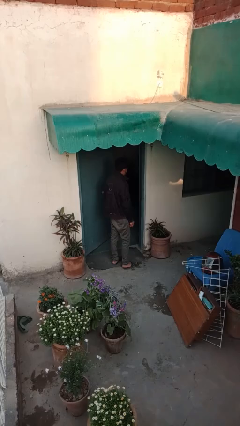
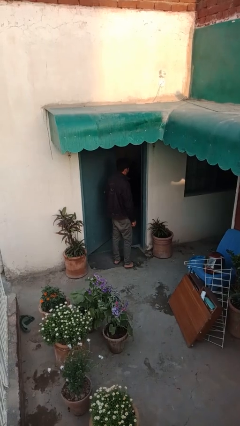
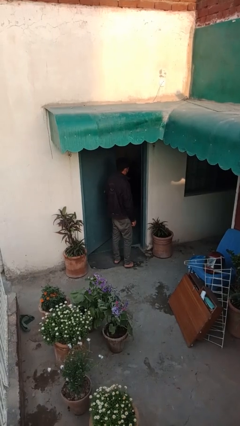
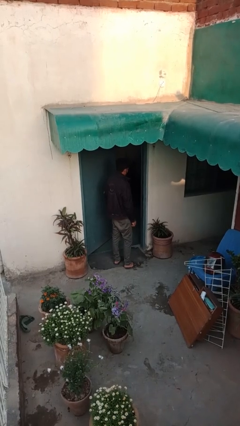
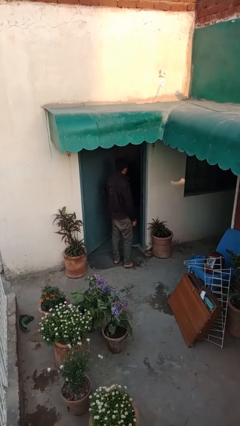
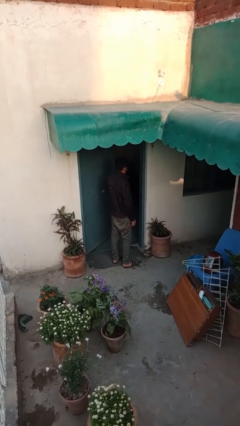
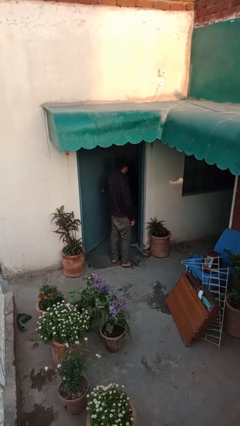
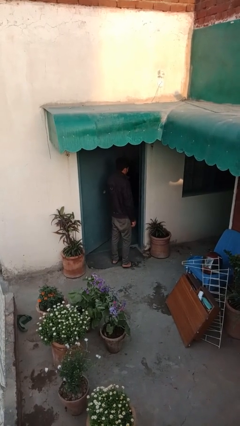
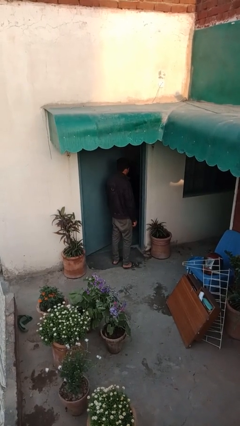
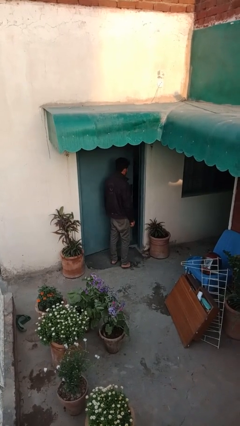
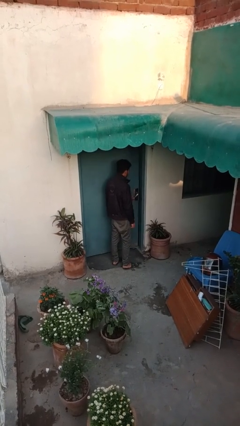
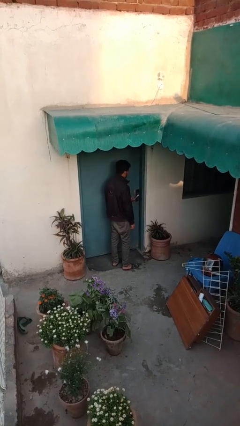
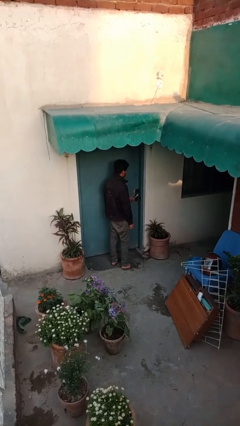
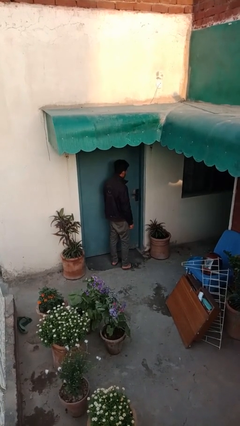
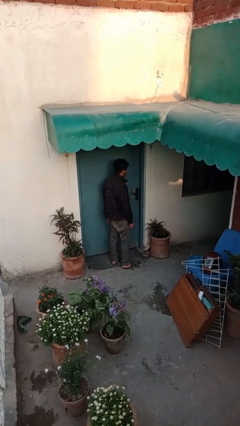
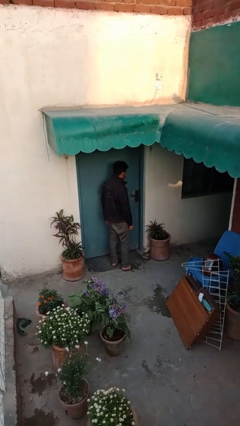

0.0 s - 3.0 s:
person closes facility door

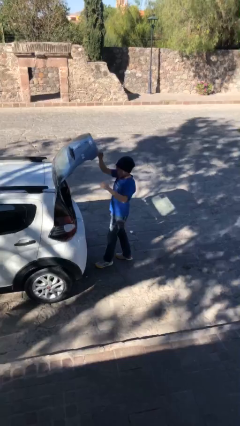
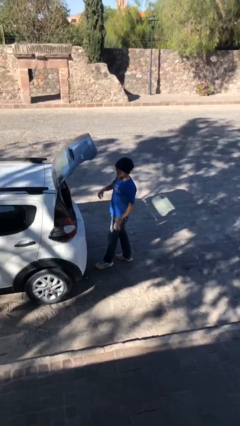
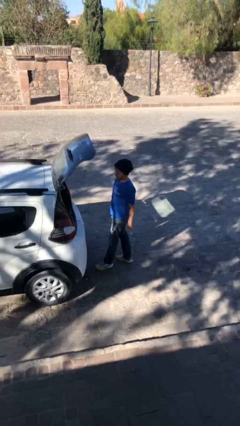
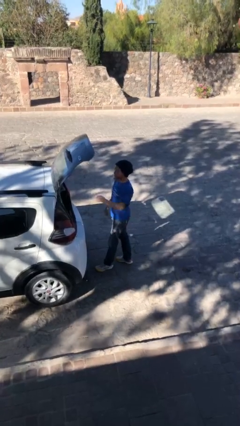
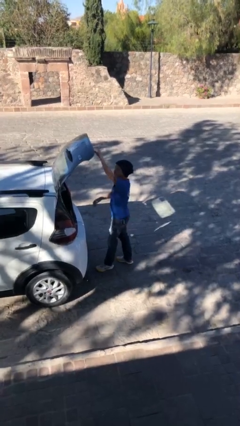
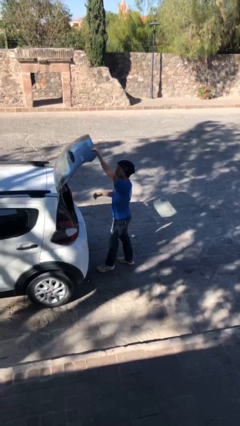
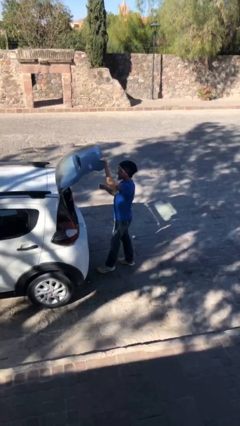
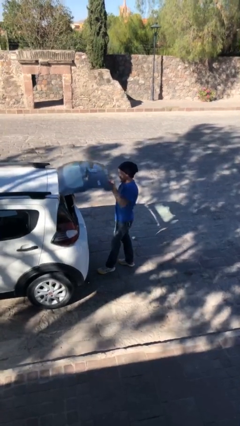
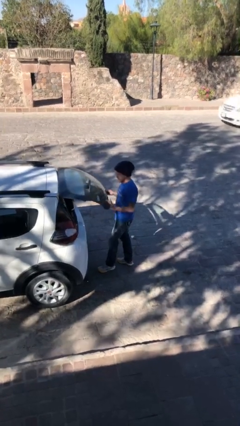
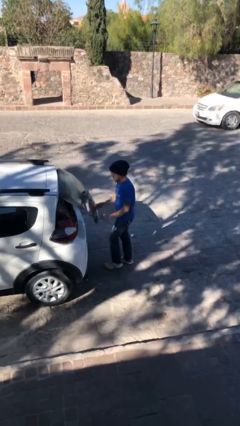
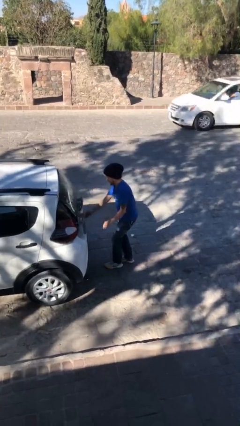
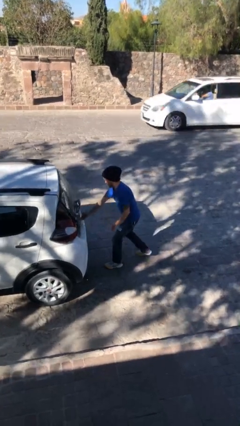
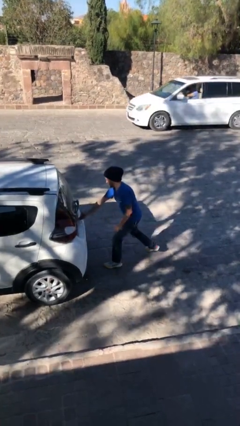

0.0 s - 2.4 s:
person closes car trunk

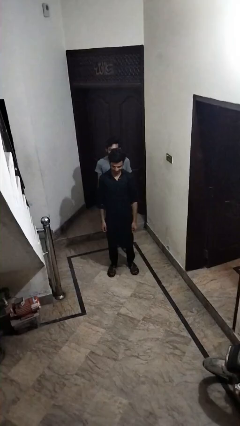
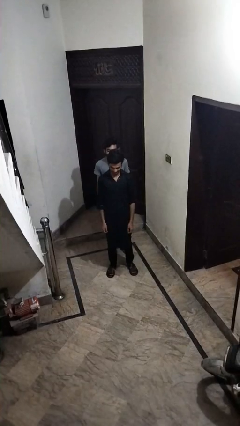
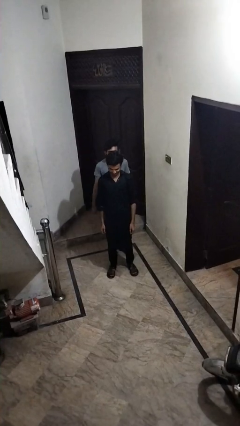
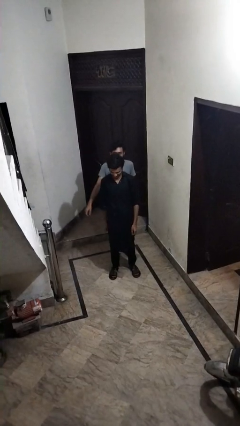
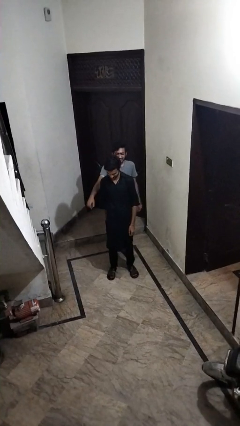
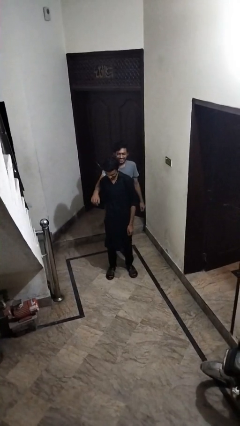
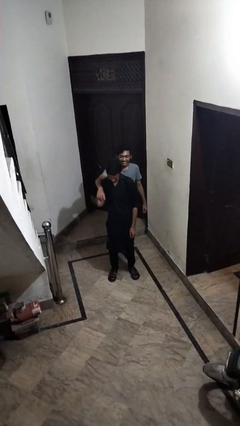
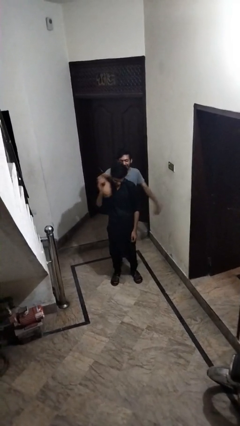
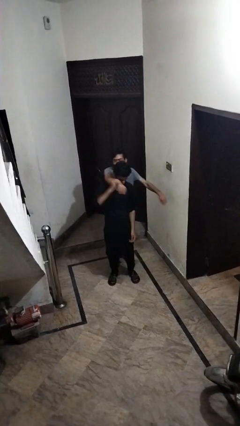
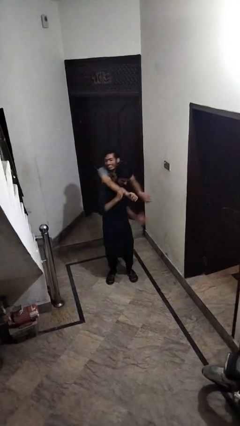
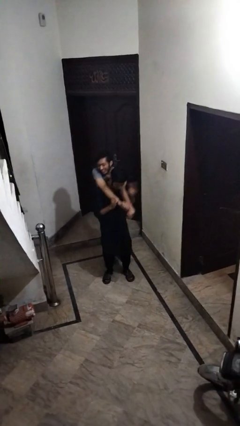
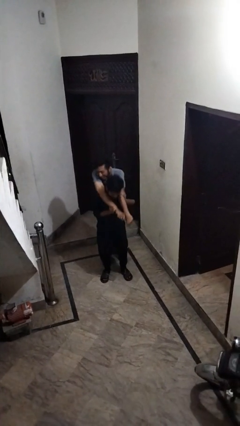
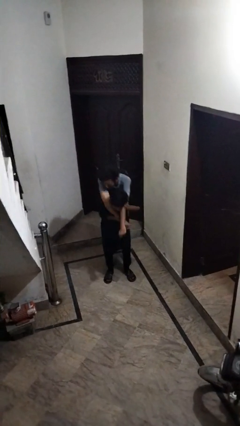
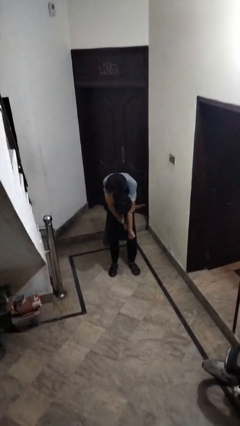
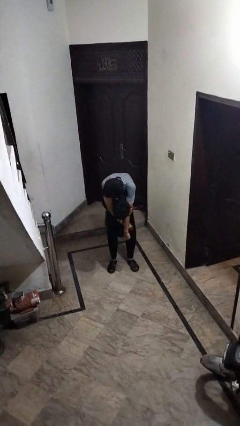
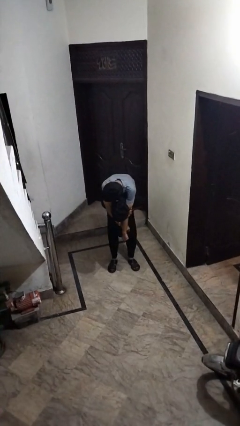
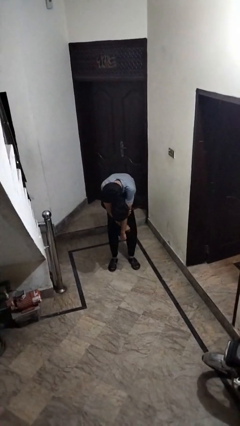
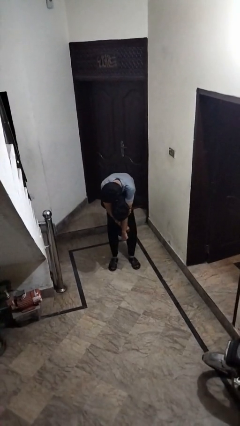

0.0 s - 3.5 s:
person carries person over shoulder

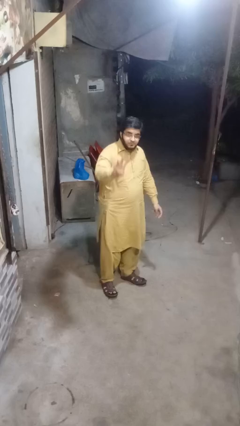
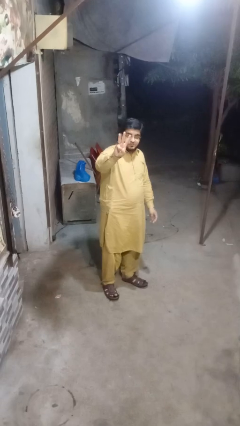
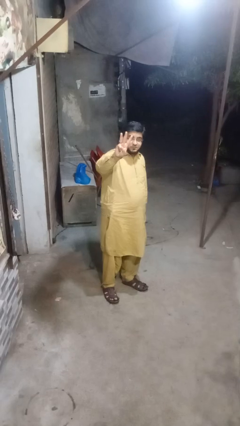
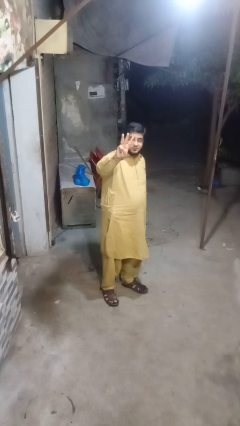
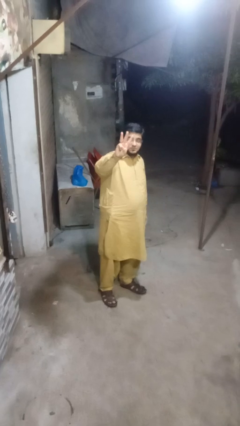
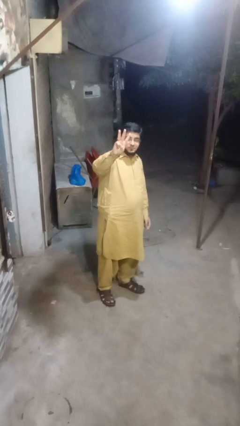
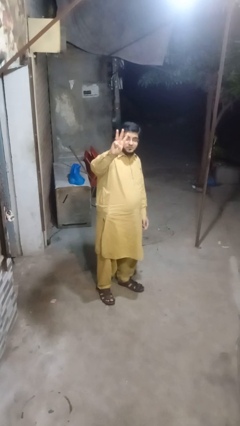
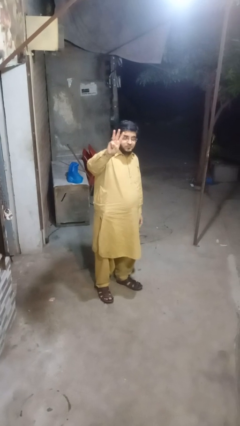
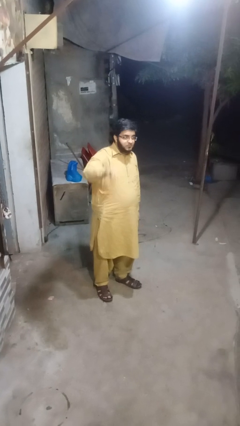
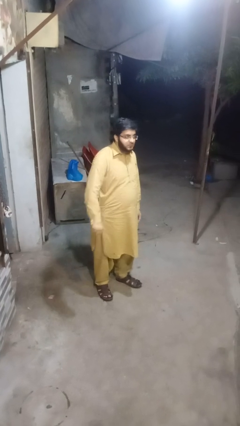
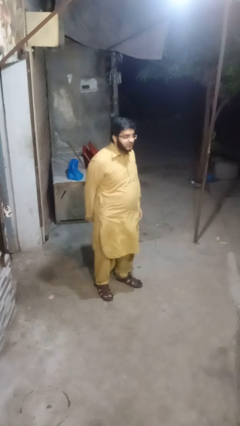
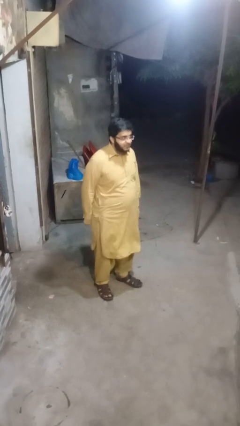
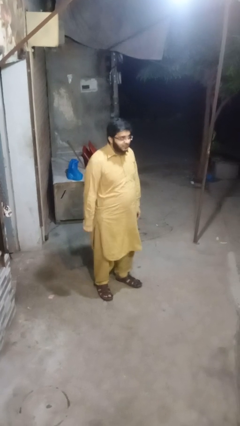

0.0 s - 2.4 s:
person gestures number three

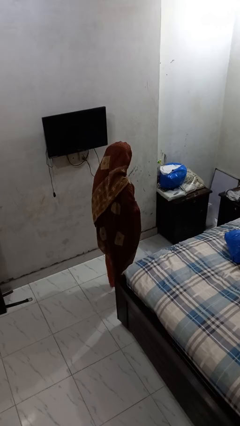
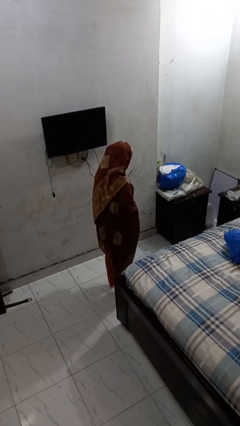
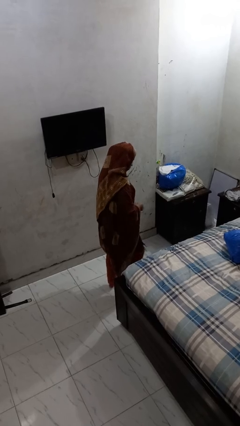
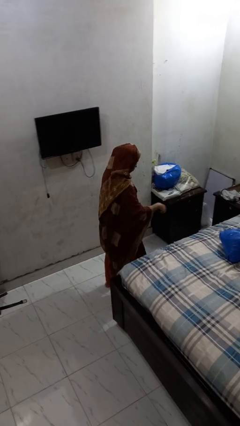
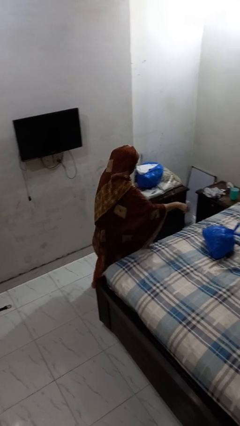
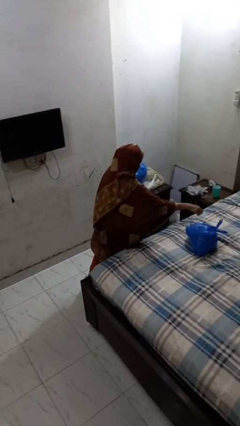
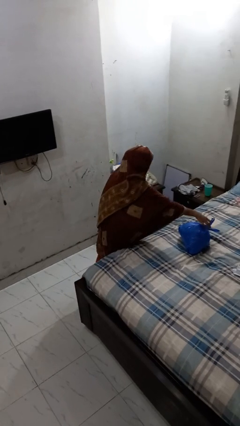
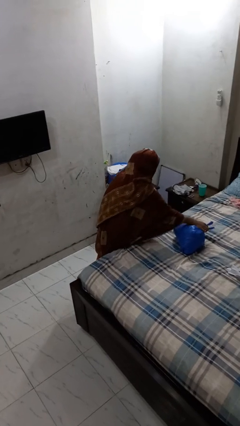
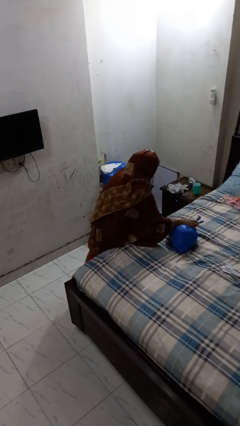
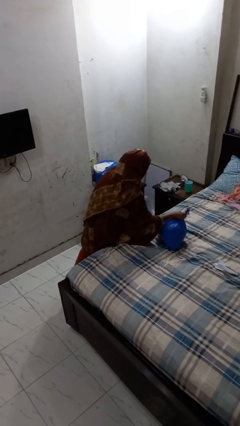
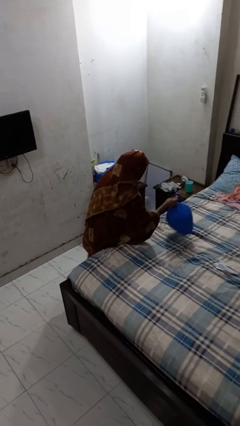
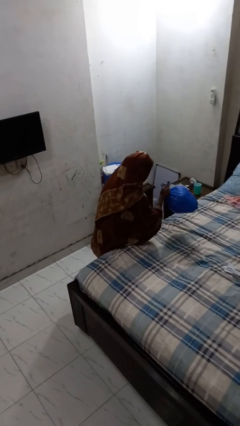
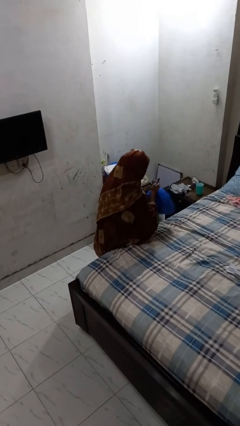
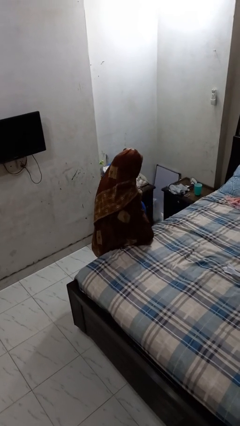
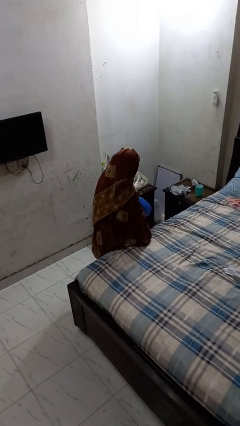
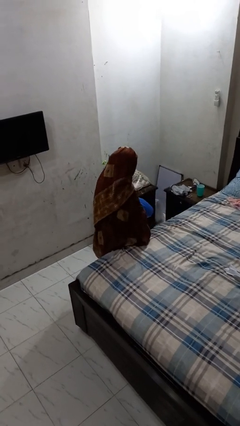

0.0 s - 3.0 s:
person picks up object from bed

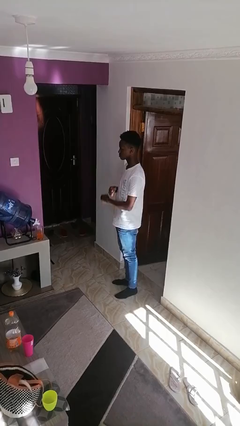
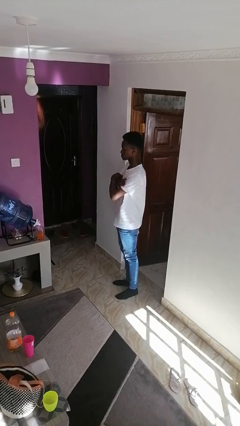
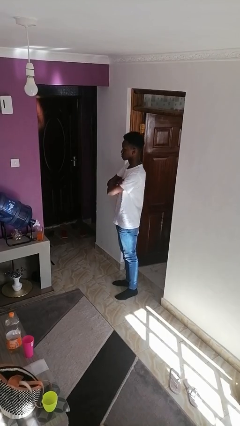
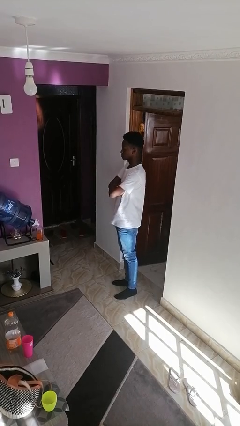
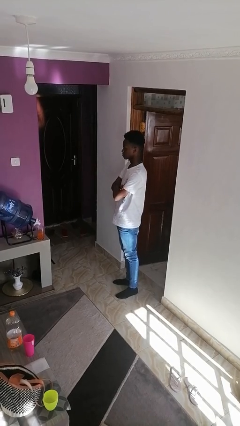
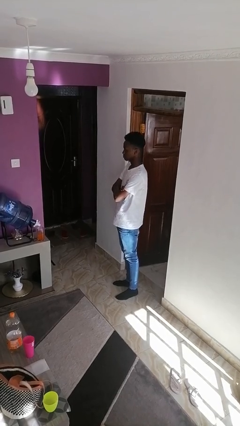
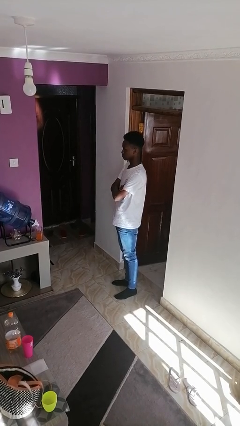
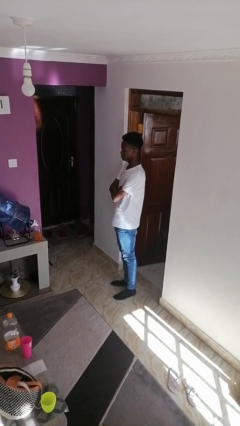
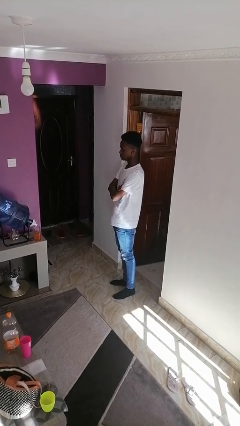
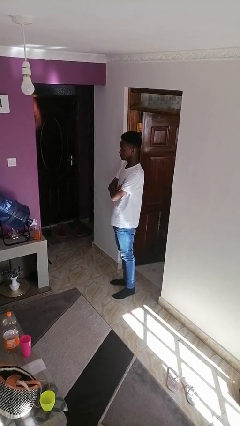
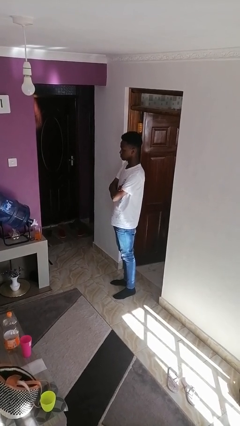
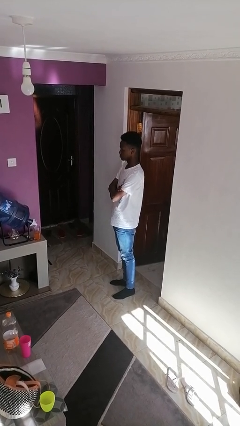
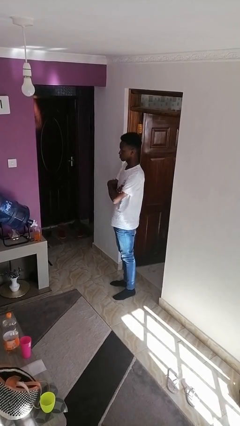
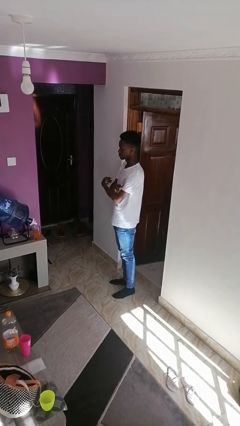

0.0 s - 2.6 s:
person crosses arms

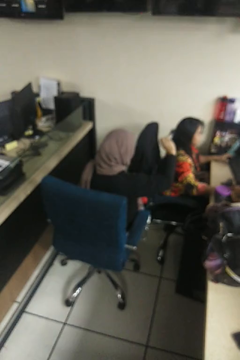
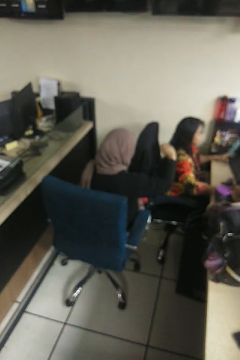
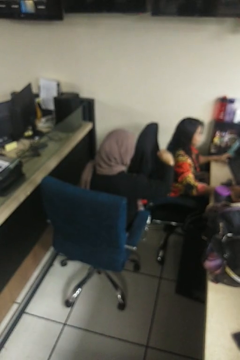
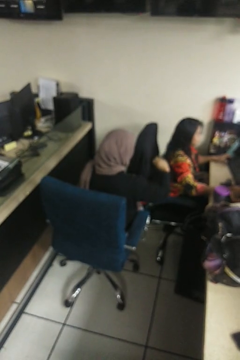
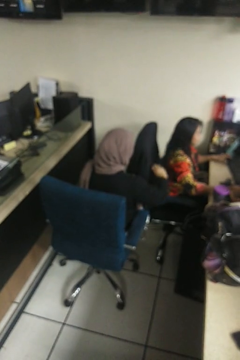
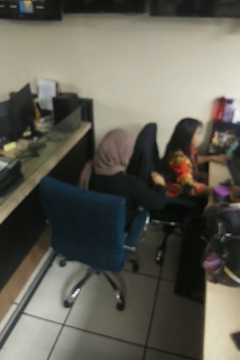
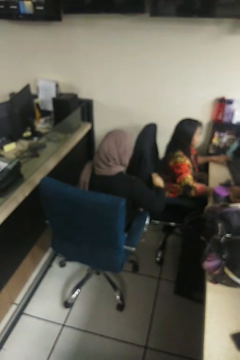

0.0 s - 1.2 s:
person brushes hair of person
